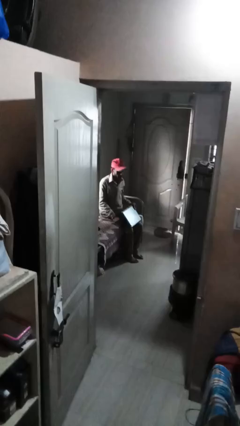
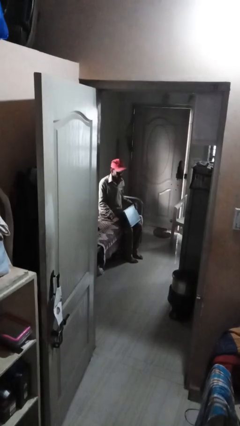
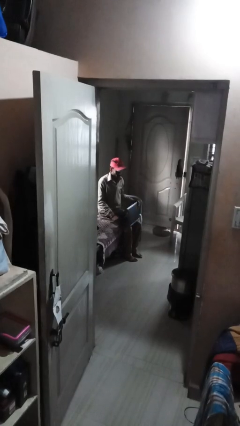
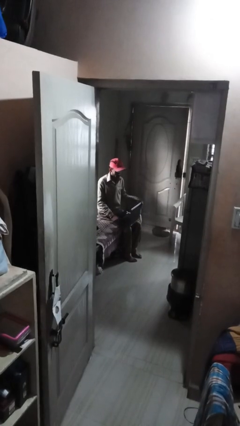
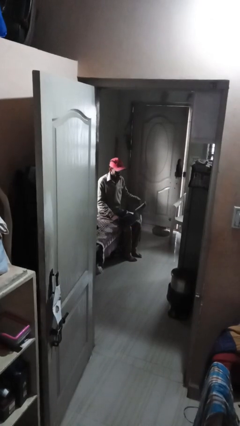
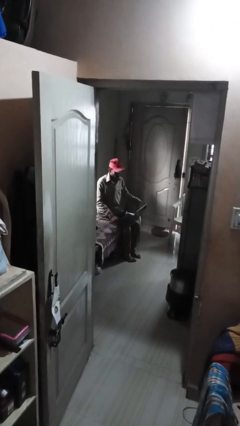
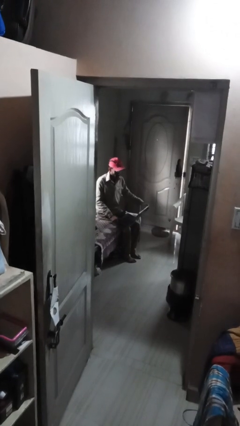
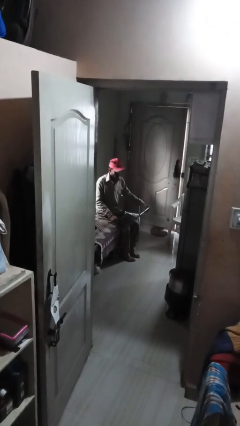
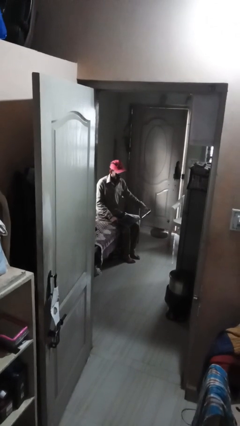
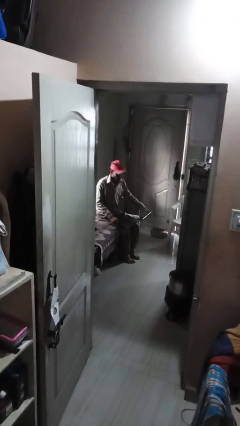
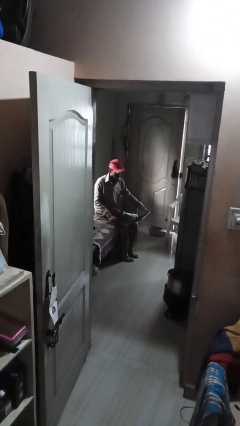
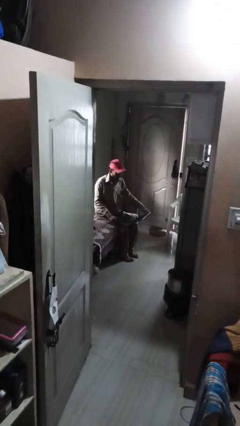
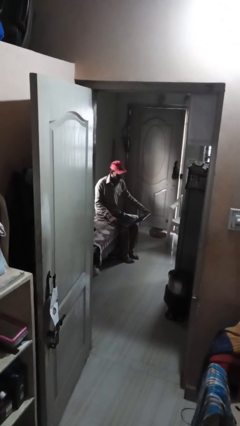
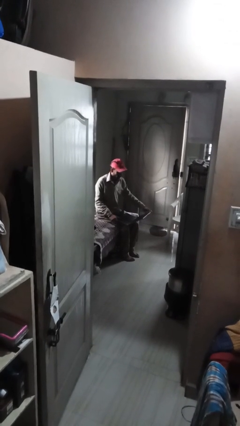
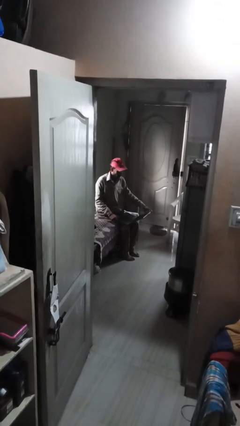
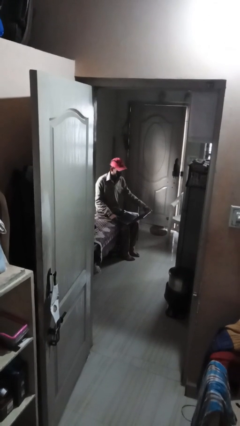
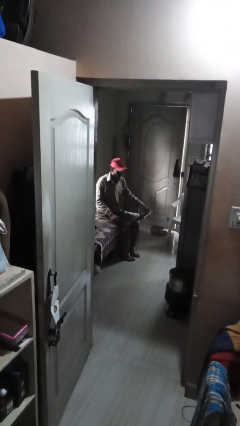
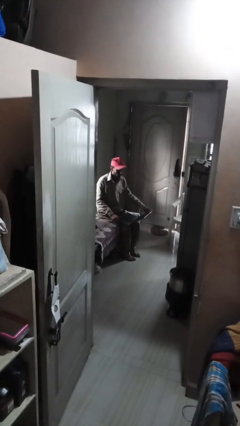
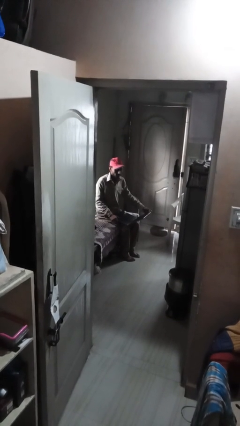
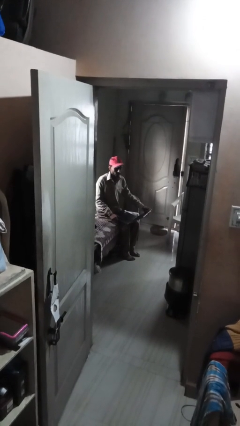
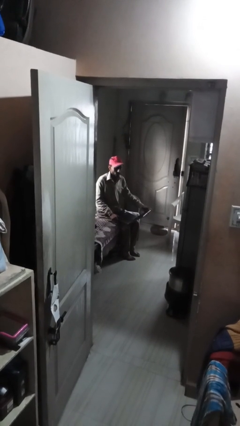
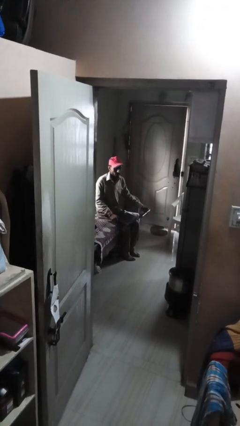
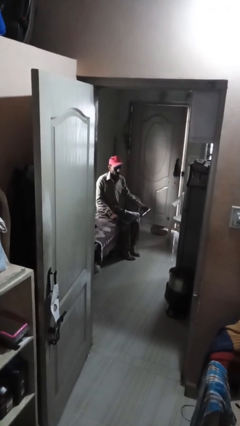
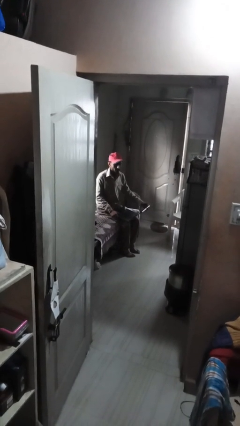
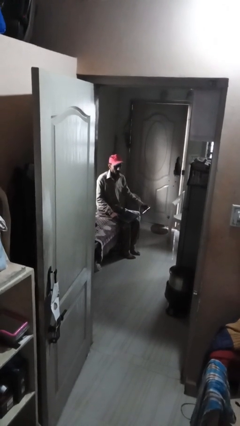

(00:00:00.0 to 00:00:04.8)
person opens laptop

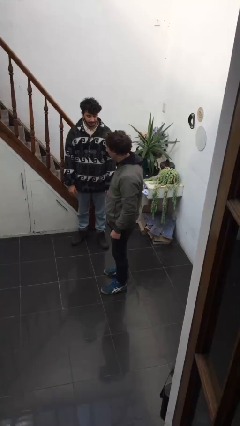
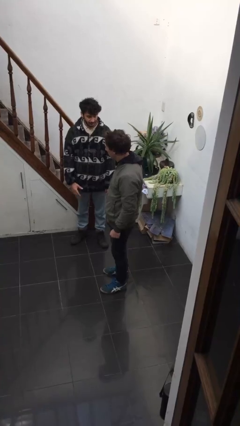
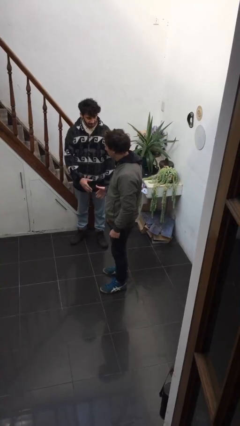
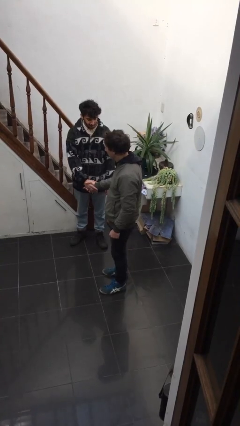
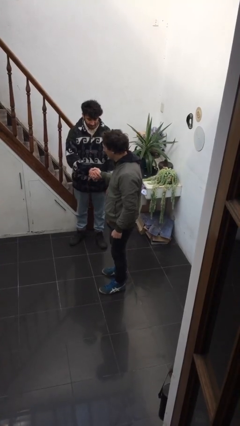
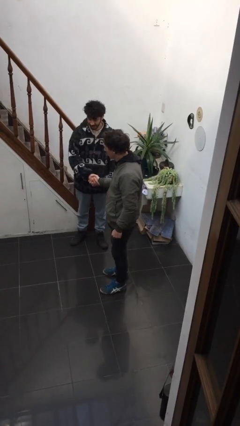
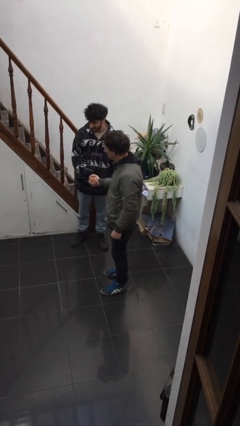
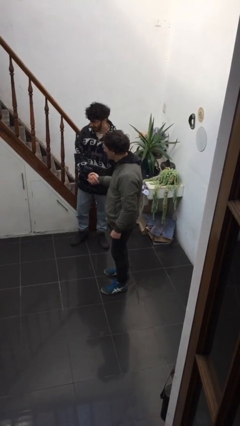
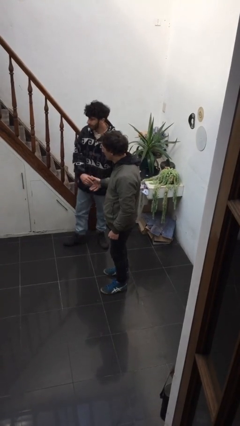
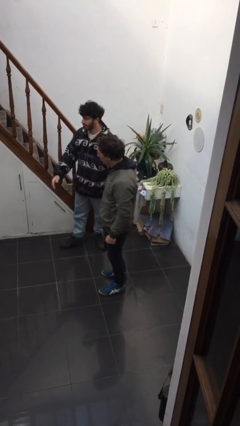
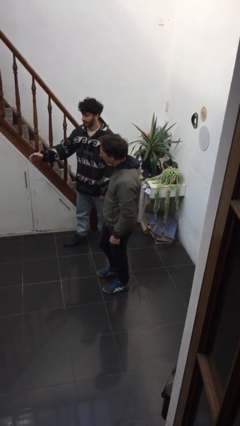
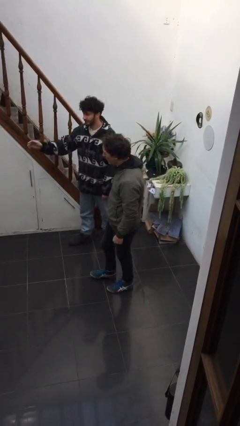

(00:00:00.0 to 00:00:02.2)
person shakes hand

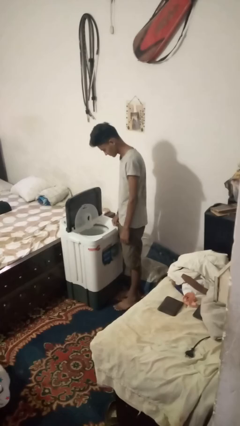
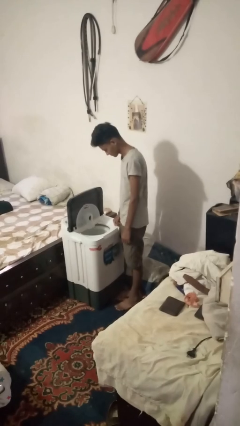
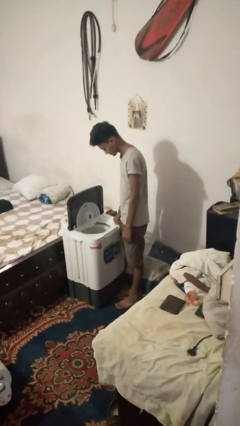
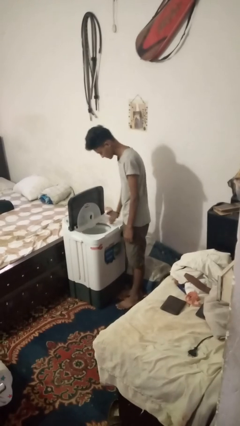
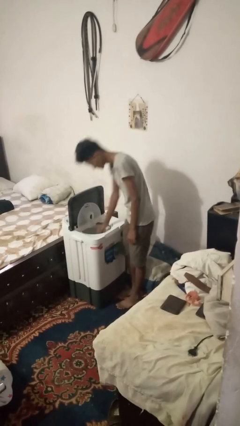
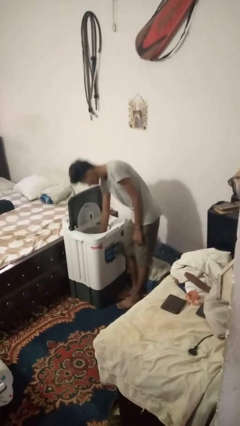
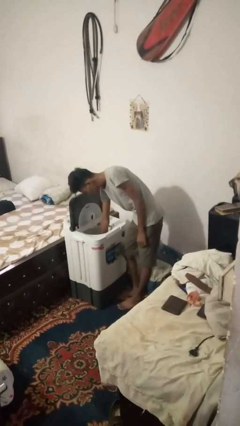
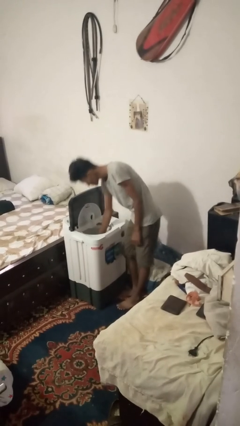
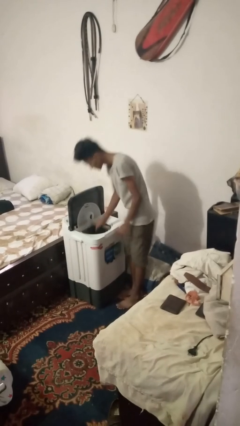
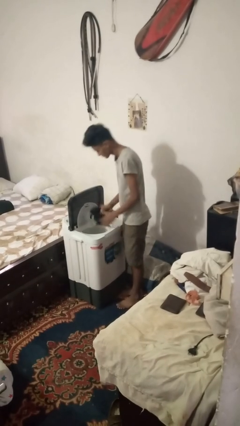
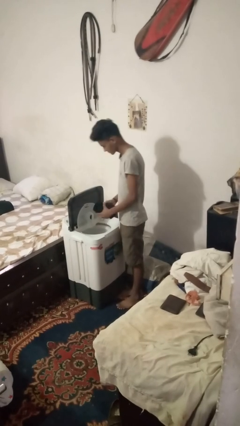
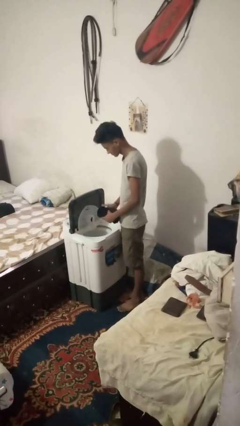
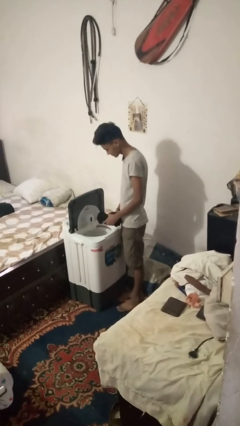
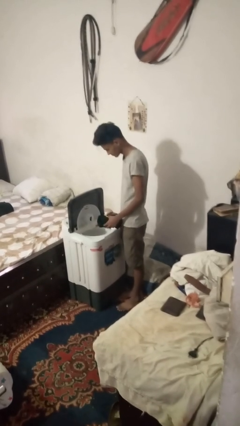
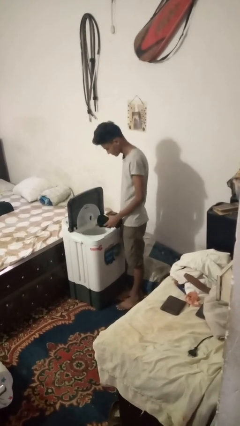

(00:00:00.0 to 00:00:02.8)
person unloads clotheswasher

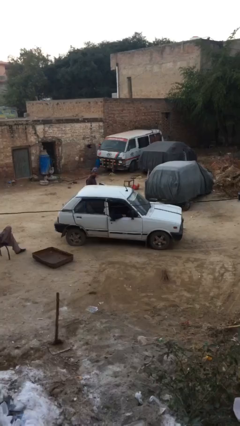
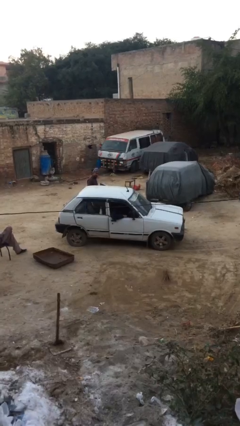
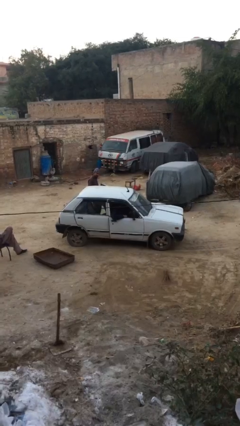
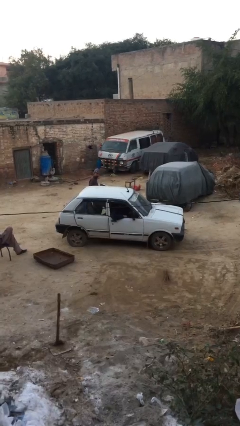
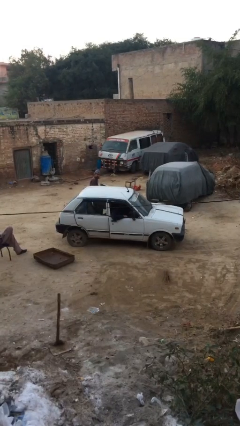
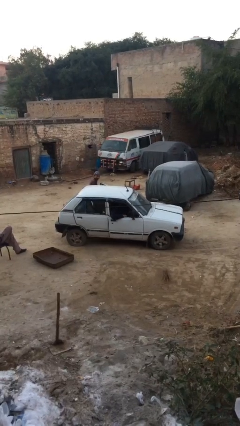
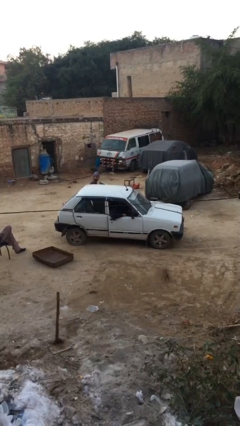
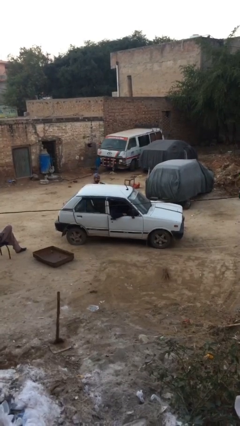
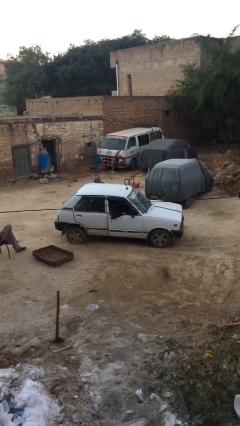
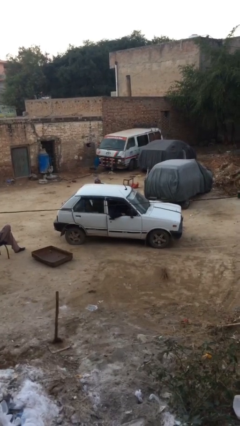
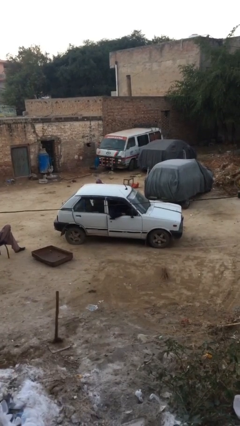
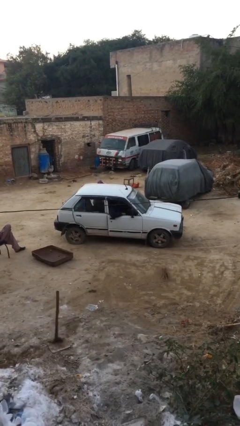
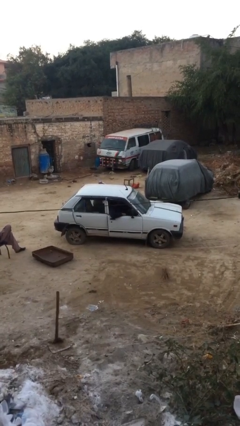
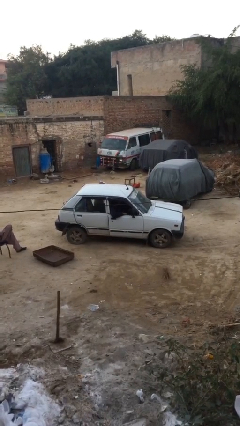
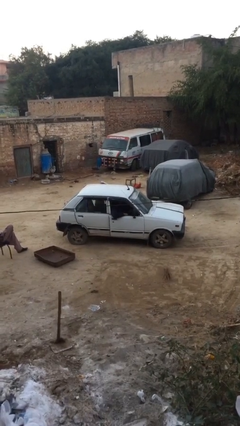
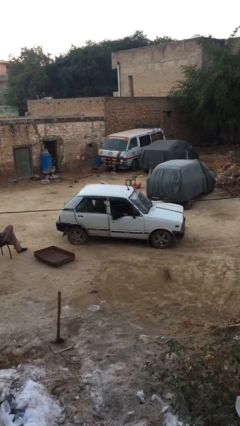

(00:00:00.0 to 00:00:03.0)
car picks up person

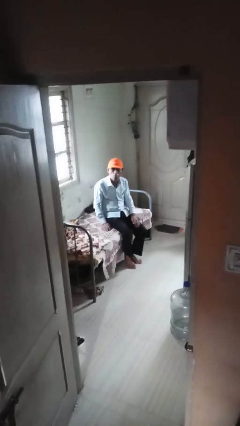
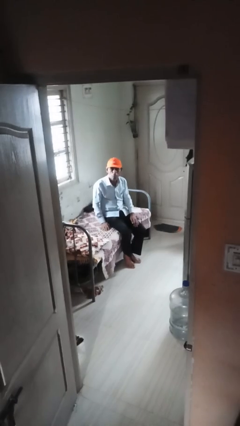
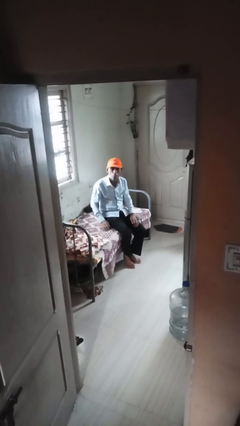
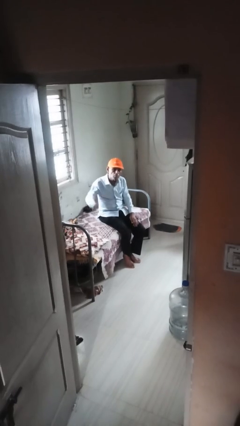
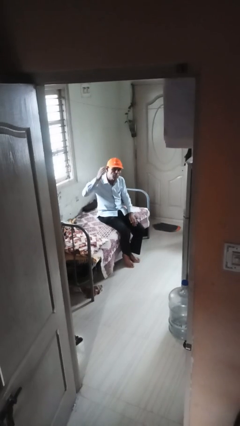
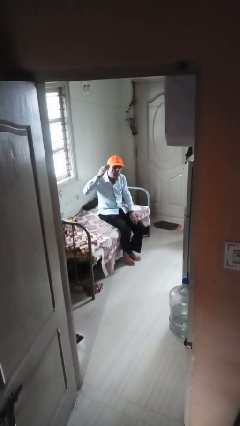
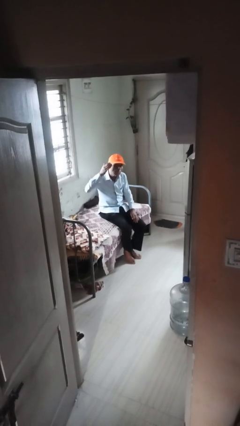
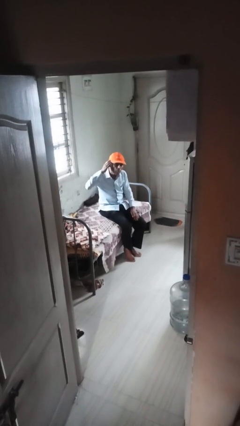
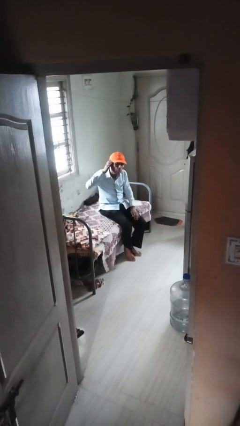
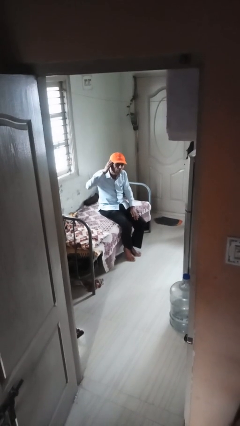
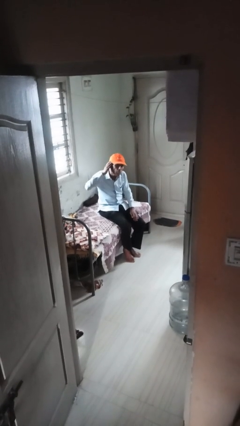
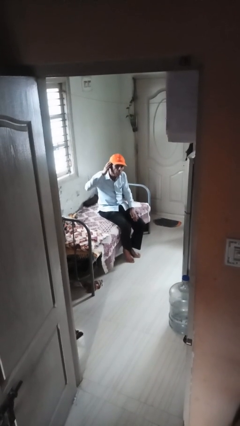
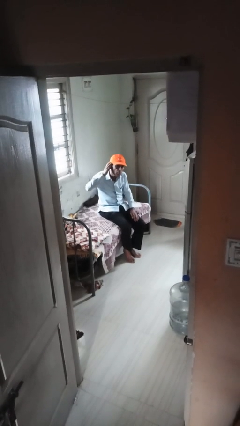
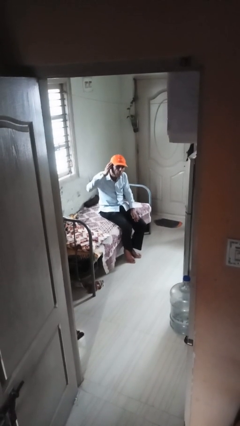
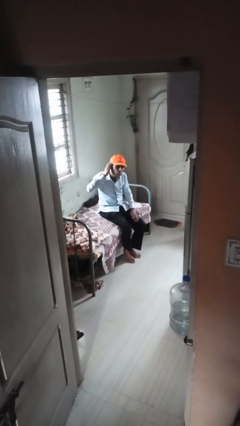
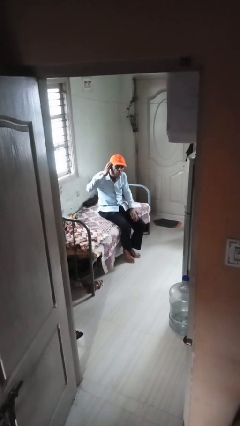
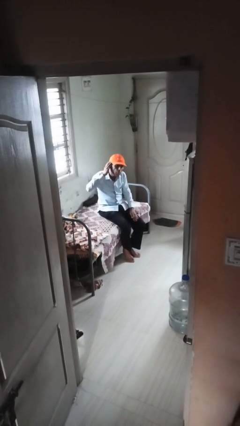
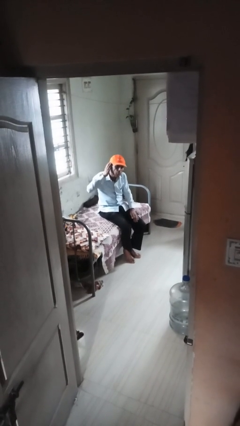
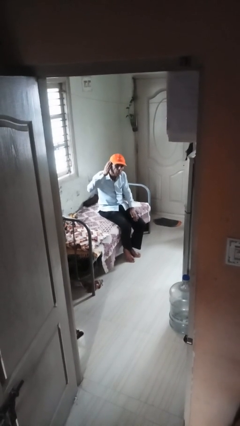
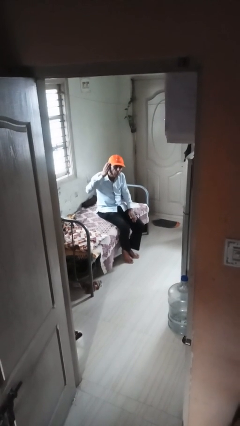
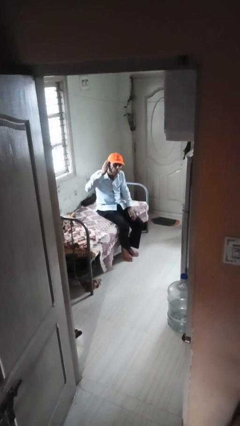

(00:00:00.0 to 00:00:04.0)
person gestures listen closely

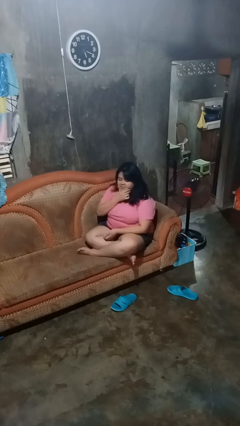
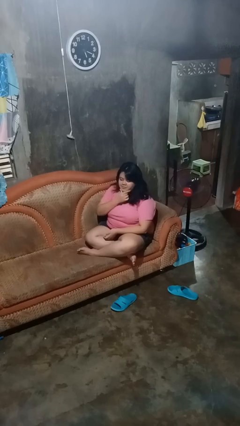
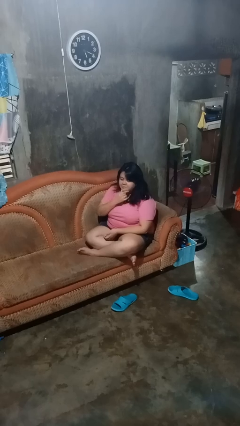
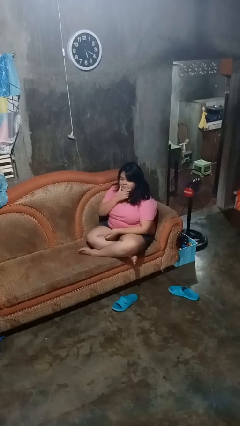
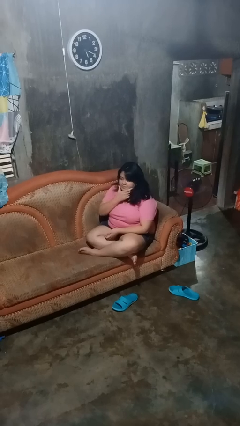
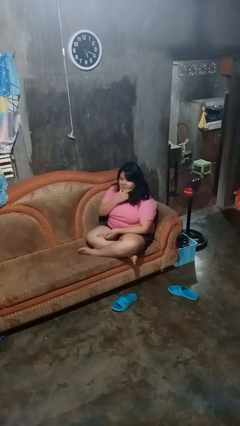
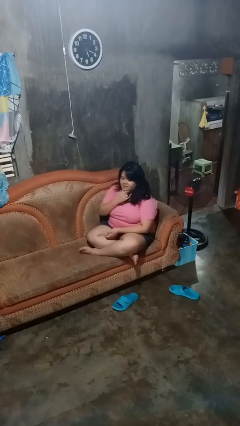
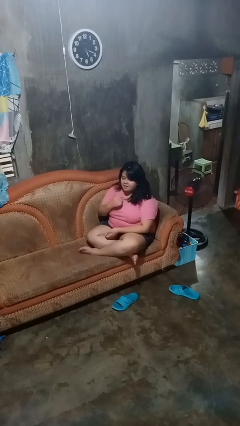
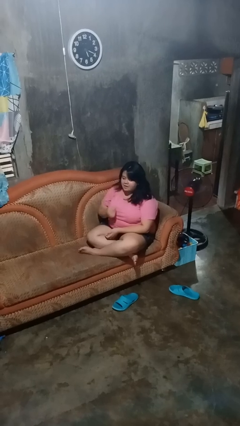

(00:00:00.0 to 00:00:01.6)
person strokes chin
